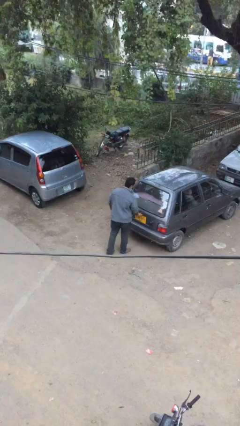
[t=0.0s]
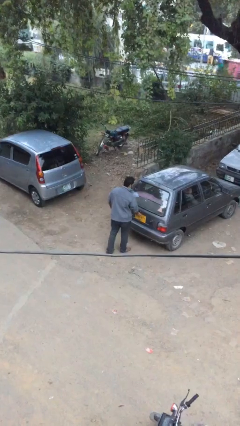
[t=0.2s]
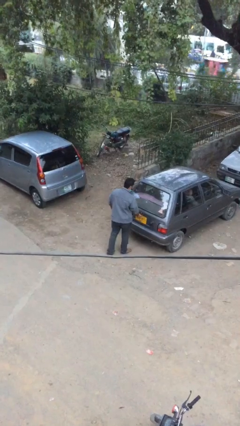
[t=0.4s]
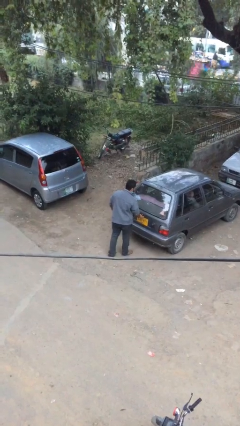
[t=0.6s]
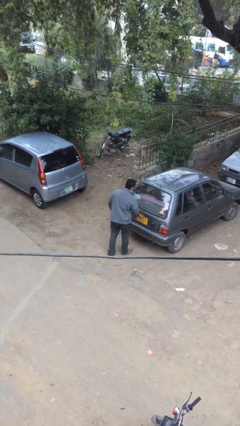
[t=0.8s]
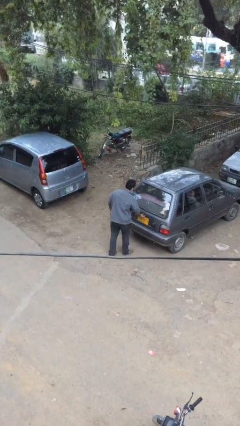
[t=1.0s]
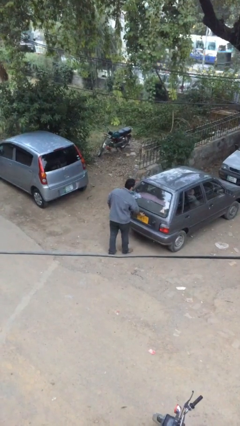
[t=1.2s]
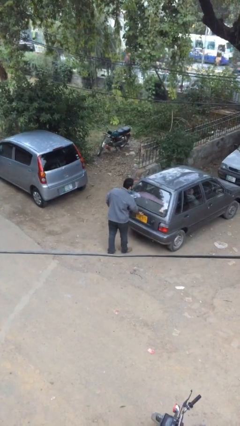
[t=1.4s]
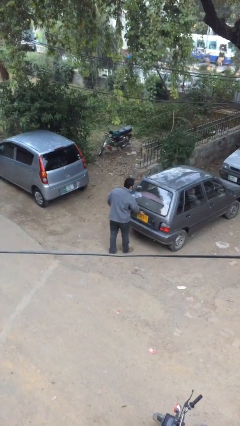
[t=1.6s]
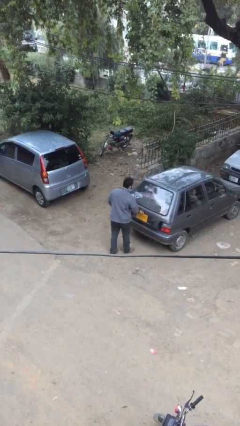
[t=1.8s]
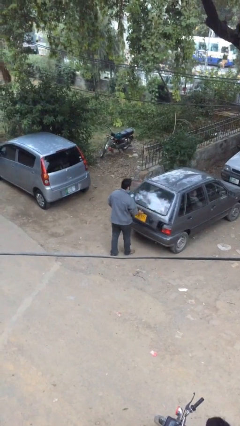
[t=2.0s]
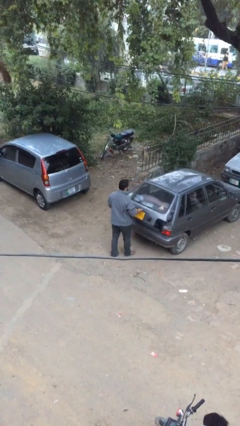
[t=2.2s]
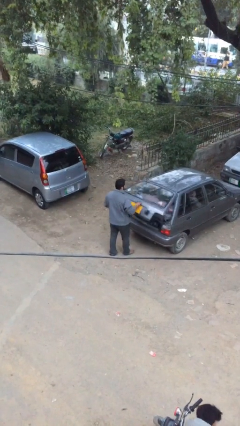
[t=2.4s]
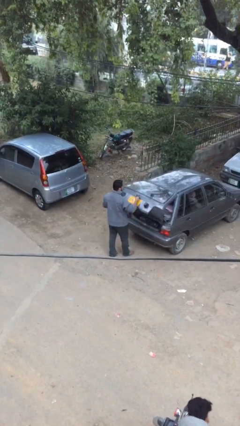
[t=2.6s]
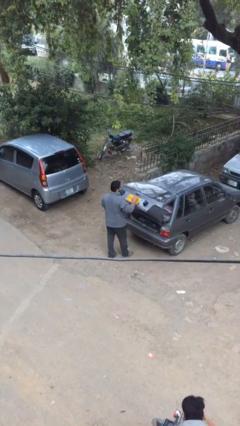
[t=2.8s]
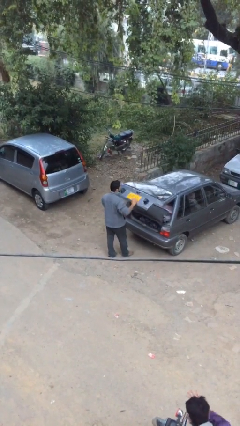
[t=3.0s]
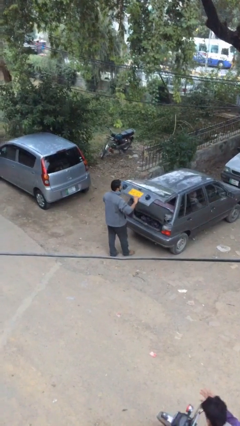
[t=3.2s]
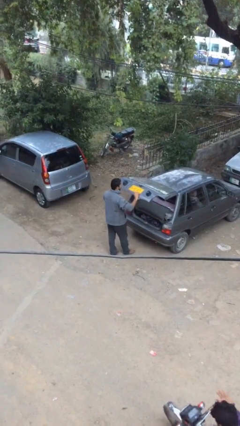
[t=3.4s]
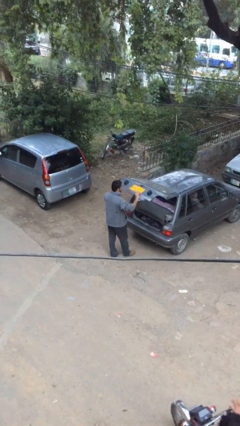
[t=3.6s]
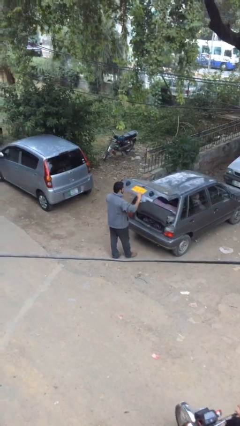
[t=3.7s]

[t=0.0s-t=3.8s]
person opens car trunk

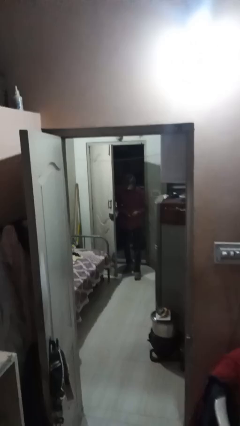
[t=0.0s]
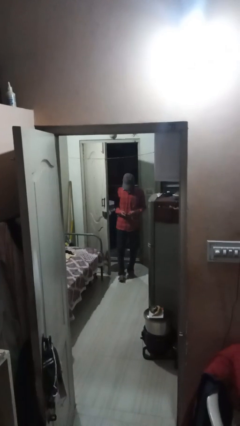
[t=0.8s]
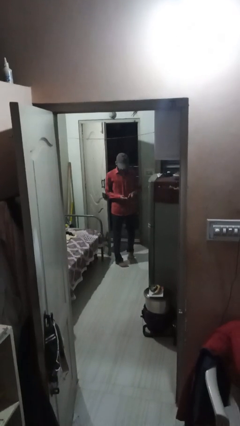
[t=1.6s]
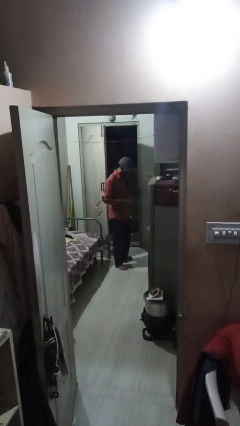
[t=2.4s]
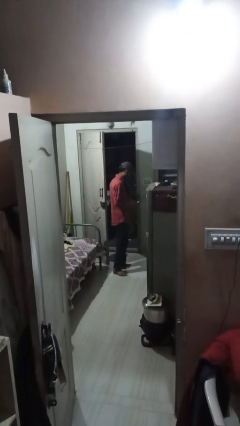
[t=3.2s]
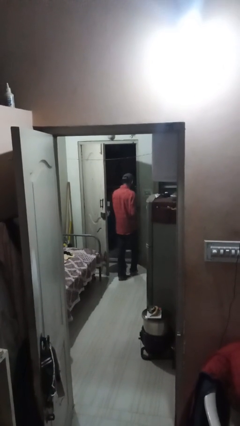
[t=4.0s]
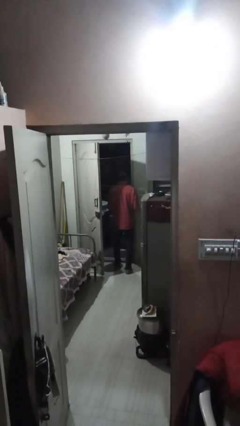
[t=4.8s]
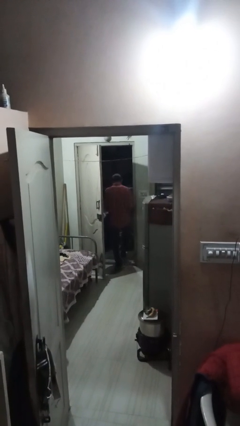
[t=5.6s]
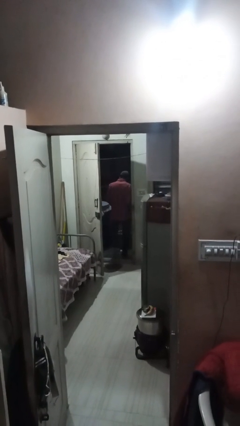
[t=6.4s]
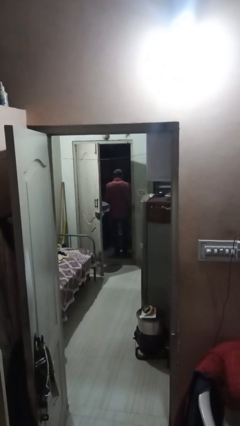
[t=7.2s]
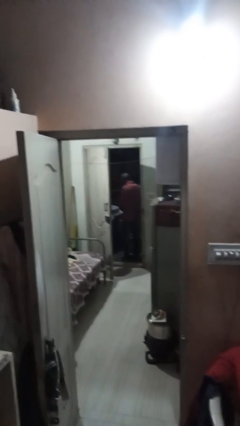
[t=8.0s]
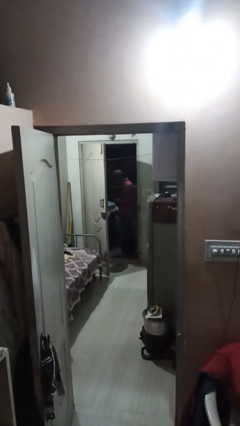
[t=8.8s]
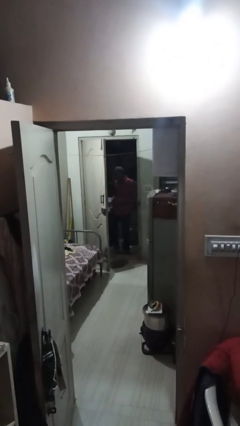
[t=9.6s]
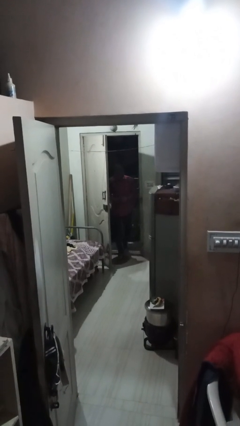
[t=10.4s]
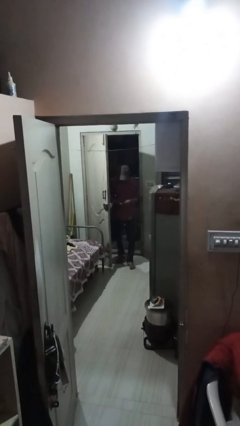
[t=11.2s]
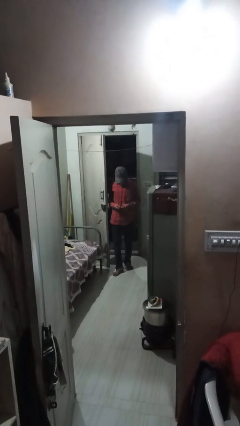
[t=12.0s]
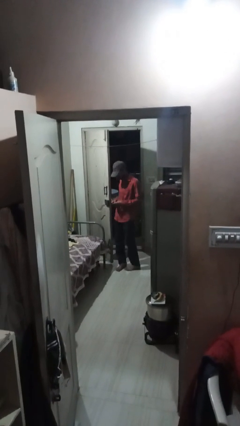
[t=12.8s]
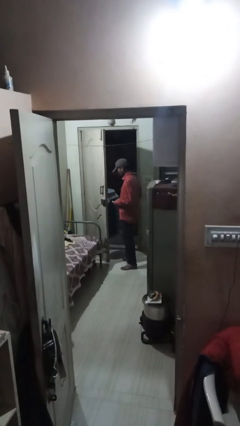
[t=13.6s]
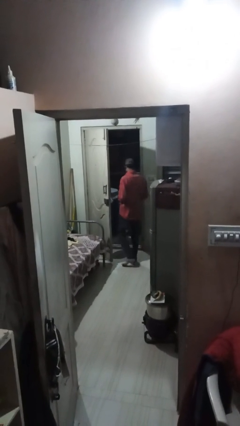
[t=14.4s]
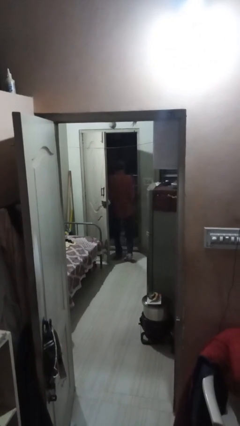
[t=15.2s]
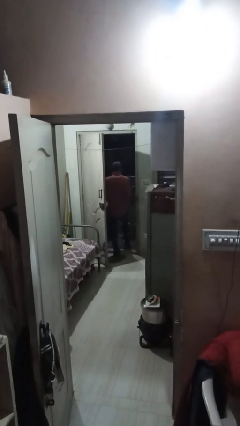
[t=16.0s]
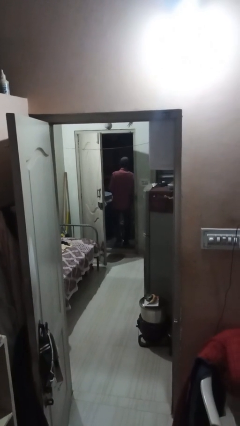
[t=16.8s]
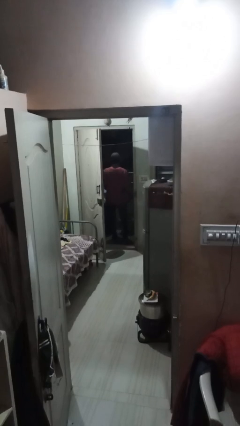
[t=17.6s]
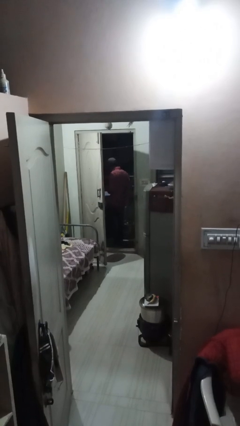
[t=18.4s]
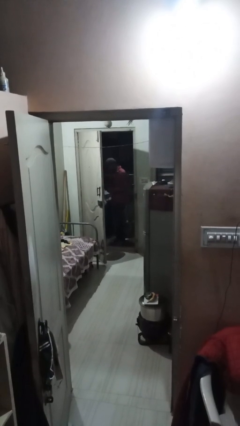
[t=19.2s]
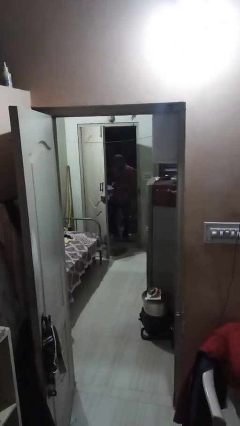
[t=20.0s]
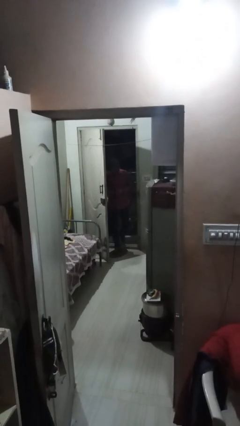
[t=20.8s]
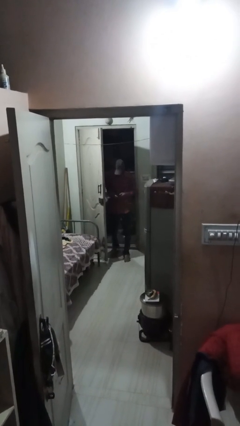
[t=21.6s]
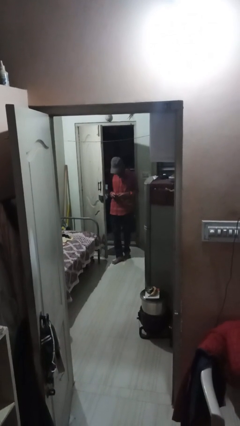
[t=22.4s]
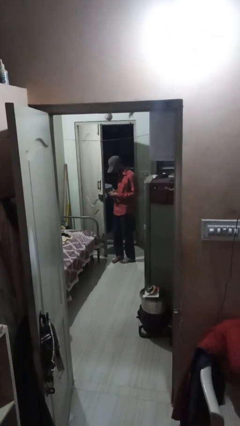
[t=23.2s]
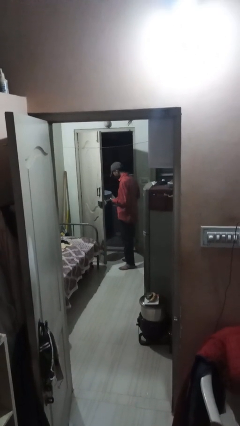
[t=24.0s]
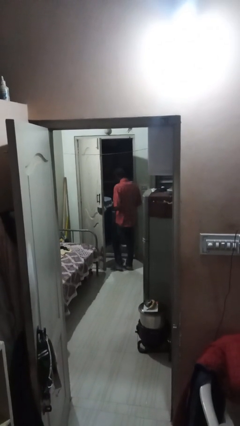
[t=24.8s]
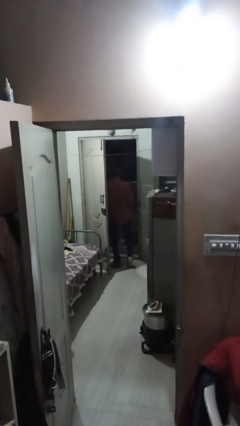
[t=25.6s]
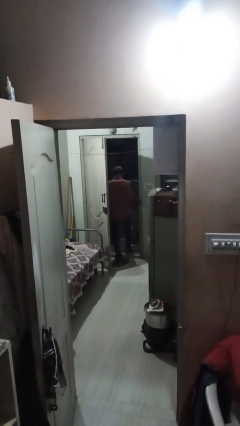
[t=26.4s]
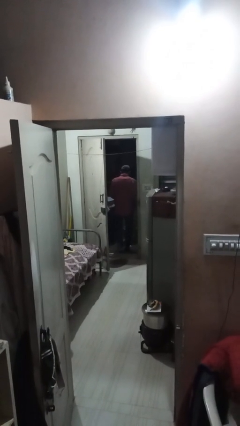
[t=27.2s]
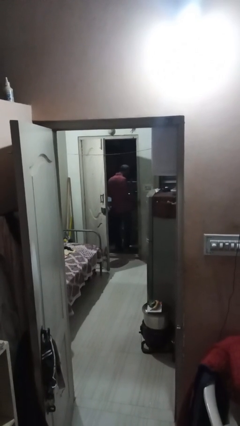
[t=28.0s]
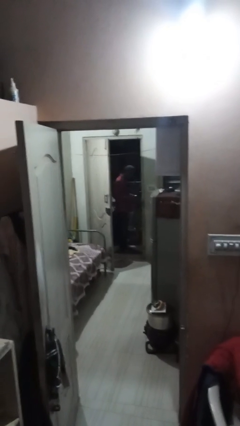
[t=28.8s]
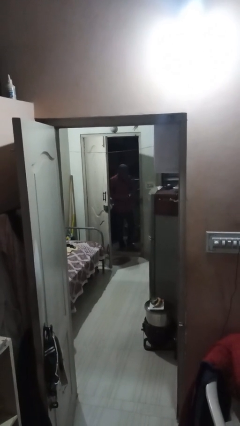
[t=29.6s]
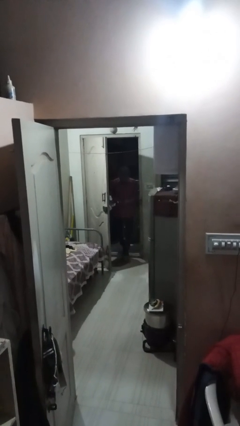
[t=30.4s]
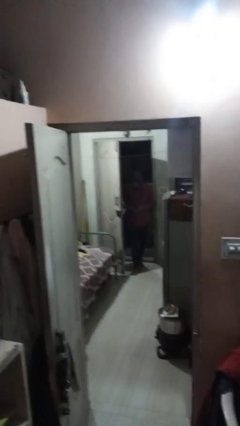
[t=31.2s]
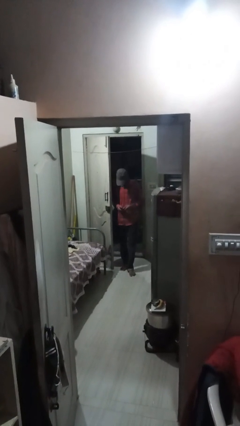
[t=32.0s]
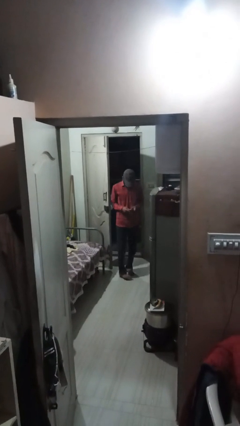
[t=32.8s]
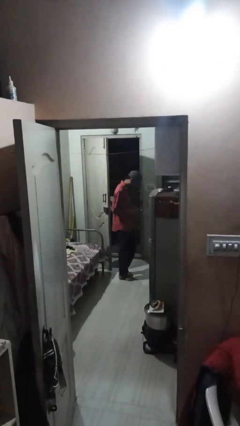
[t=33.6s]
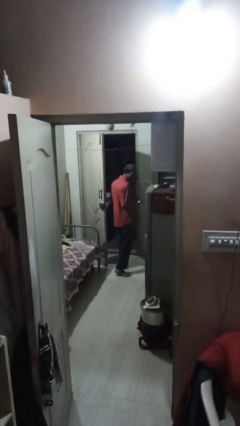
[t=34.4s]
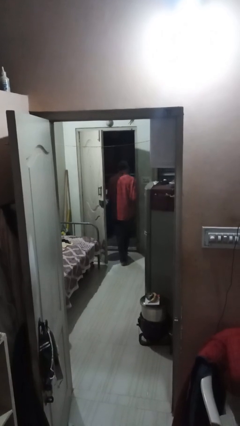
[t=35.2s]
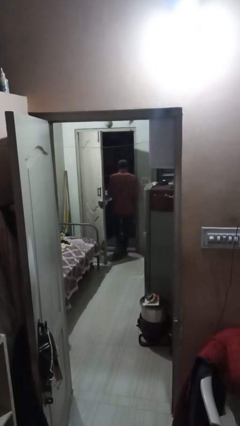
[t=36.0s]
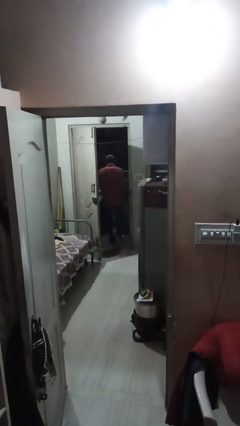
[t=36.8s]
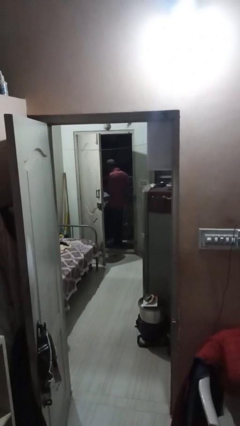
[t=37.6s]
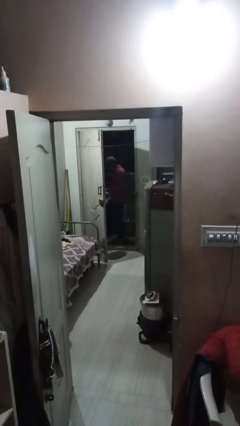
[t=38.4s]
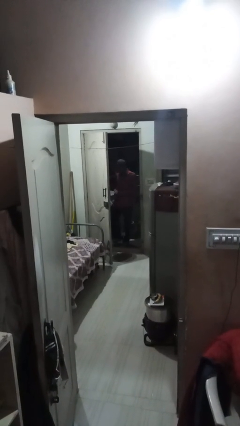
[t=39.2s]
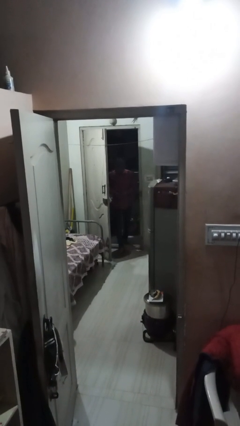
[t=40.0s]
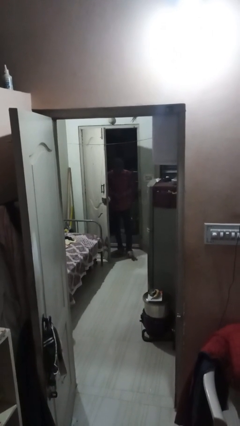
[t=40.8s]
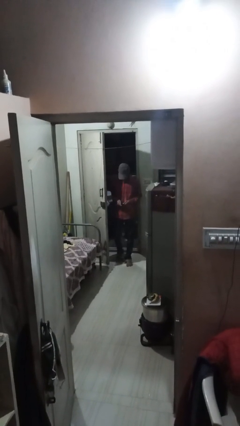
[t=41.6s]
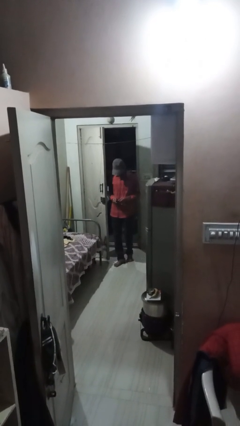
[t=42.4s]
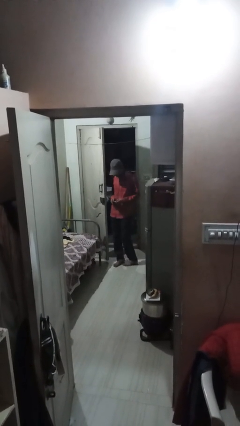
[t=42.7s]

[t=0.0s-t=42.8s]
person texts on phone

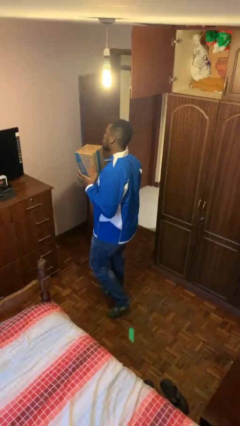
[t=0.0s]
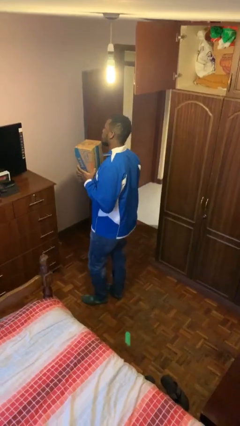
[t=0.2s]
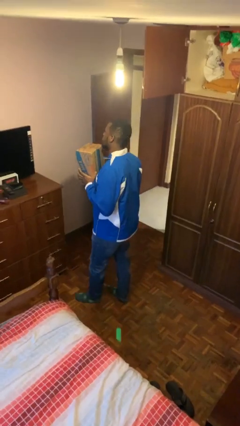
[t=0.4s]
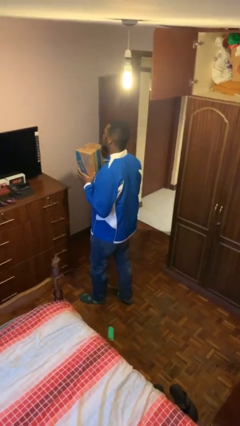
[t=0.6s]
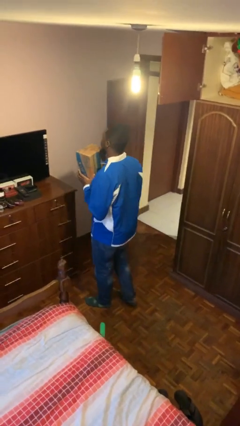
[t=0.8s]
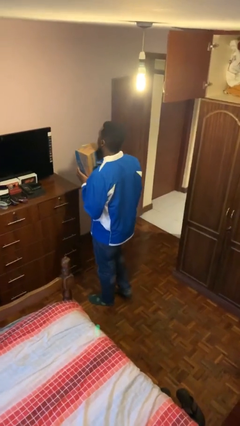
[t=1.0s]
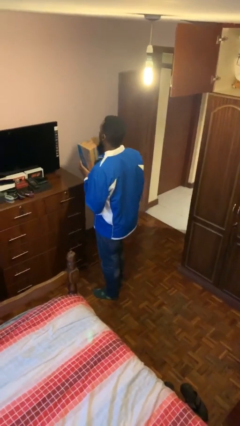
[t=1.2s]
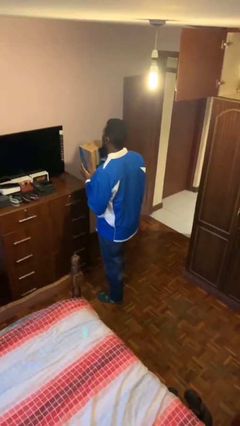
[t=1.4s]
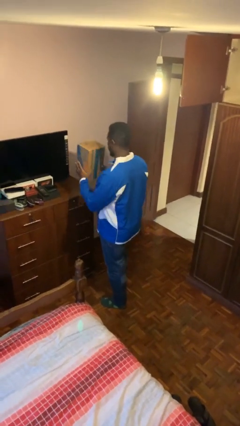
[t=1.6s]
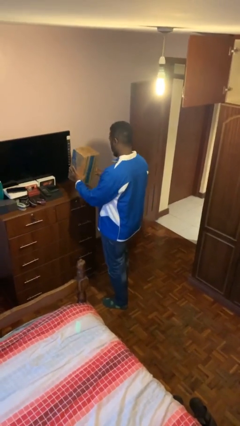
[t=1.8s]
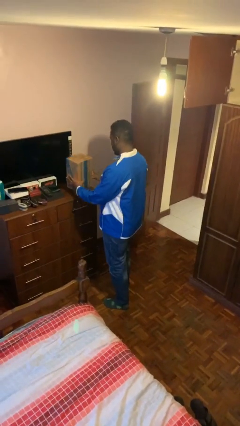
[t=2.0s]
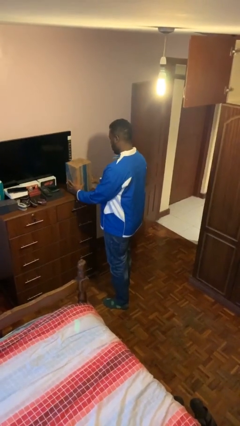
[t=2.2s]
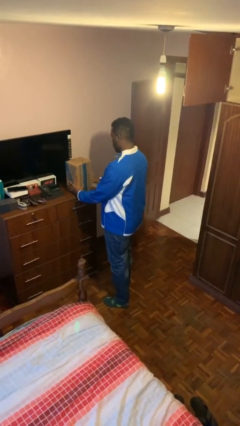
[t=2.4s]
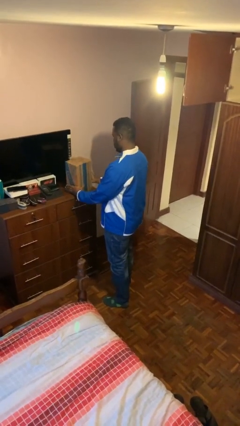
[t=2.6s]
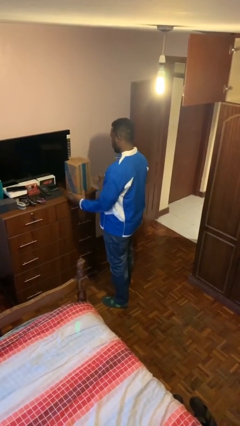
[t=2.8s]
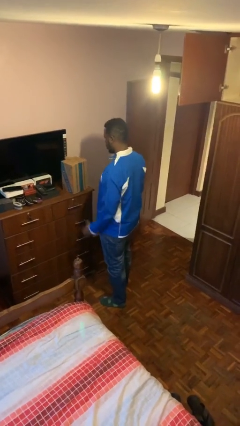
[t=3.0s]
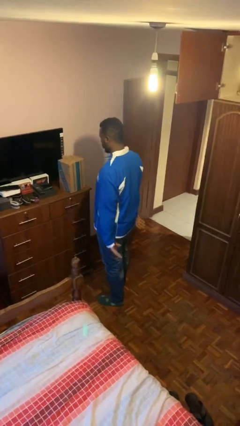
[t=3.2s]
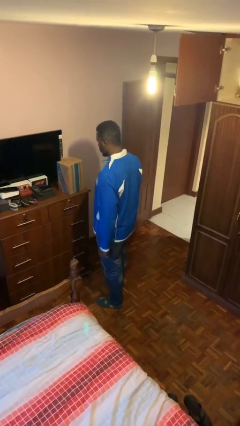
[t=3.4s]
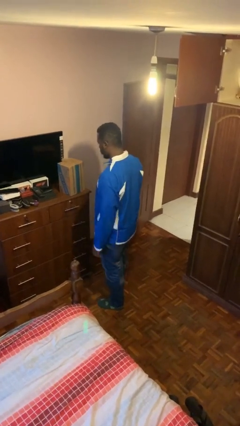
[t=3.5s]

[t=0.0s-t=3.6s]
person puts down object on table
